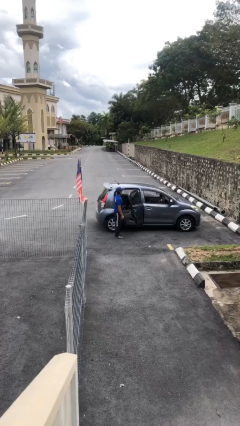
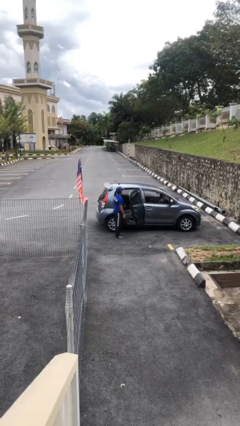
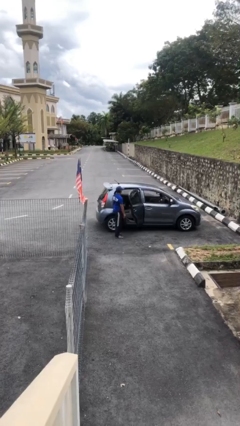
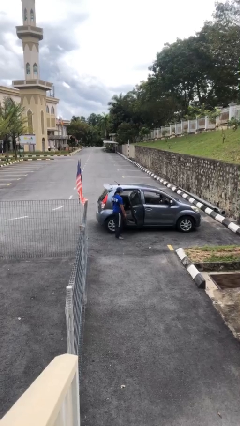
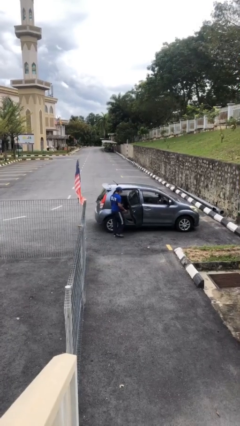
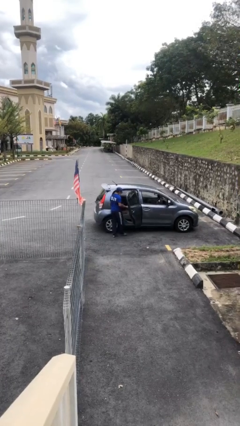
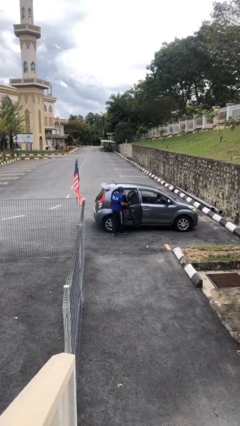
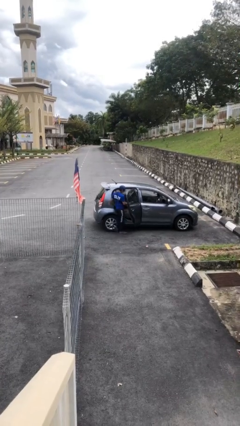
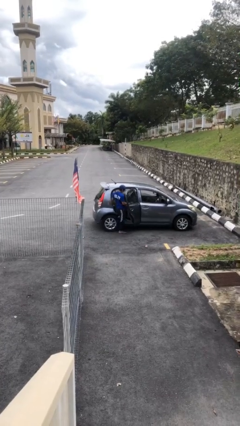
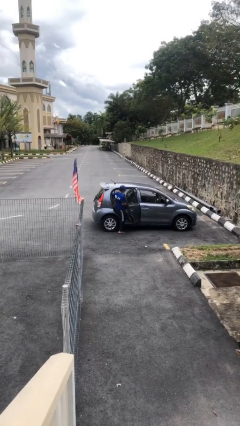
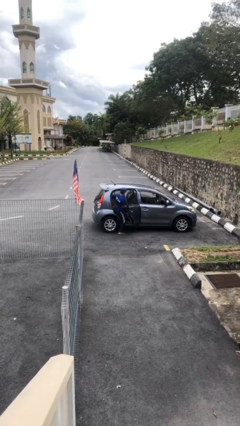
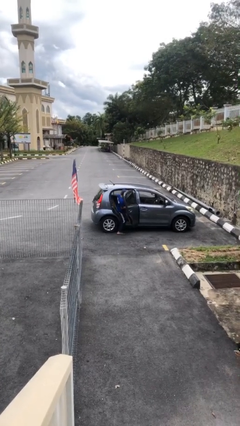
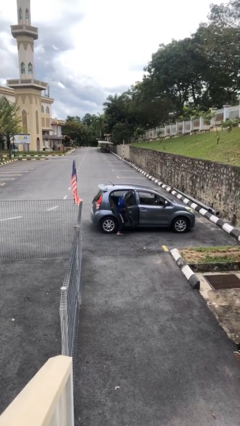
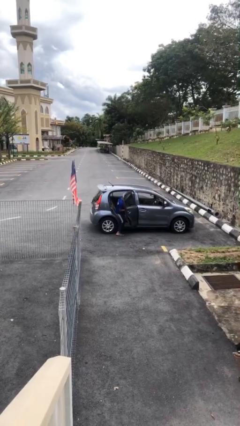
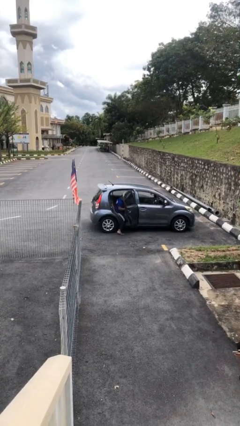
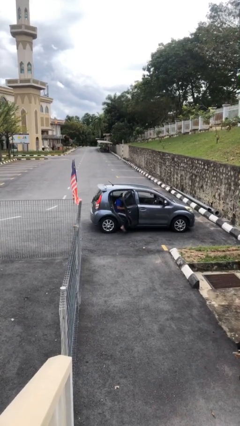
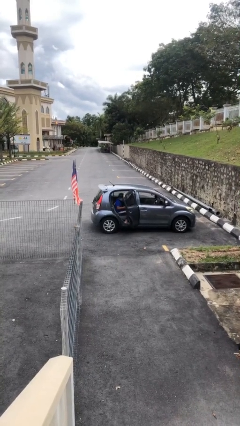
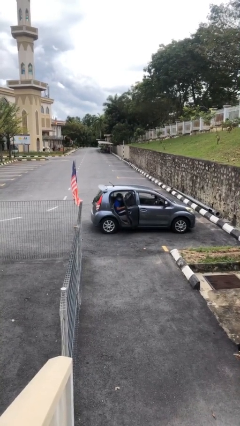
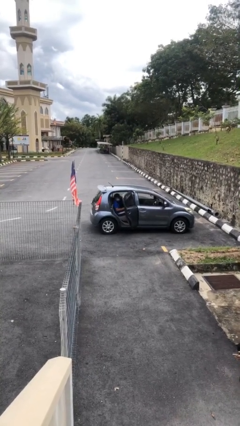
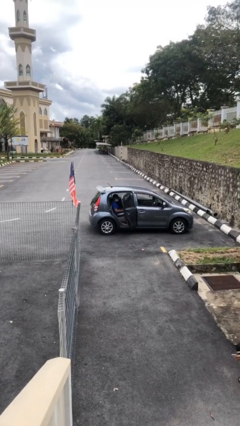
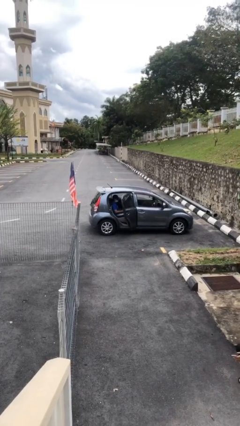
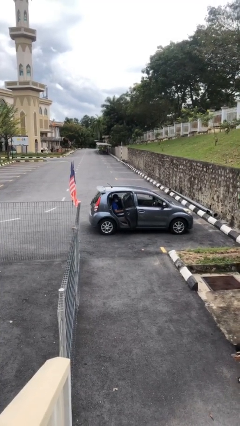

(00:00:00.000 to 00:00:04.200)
person enters car

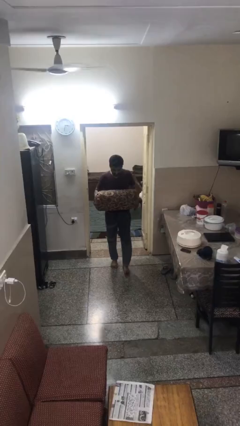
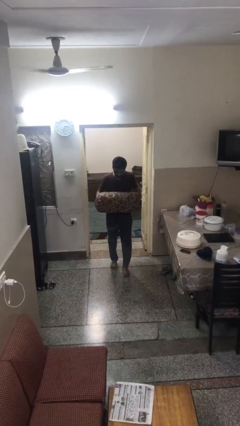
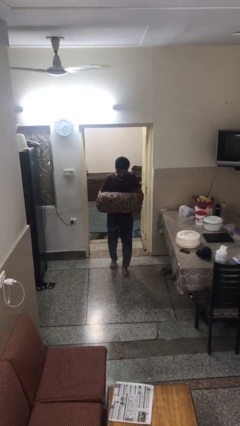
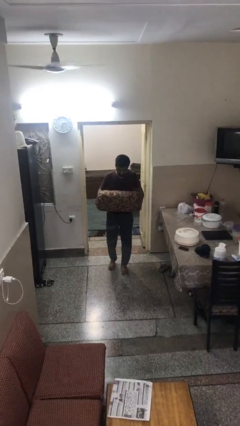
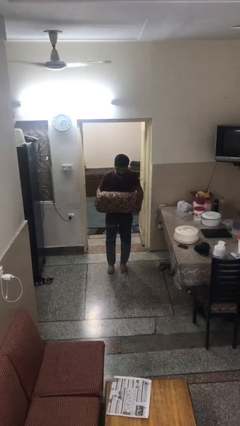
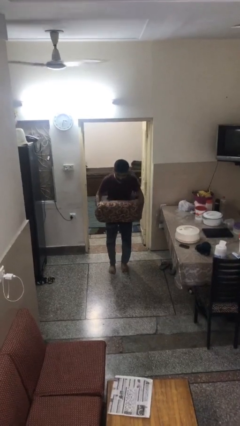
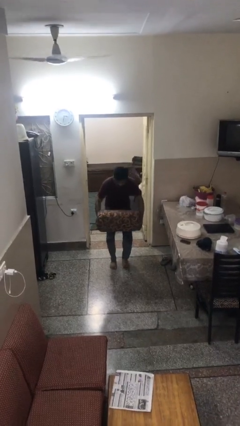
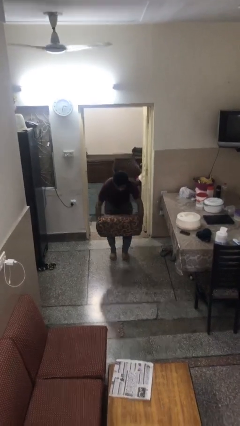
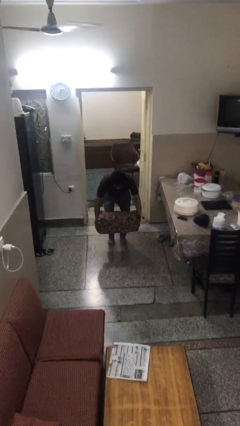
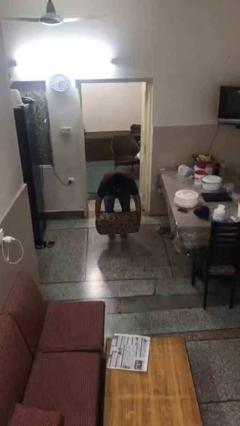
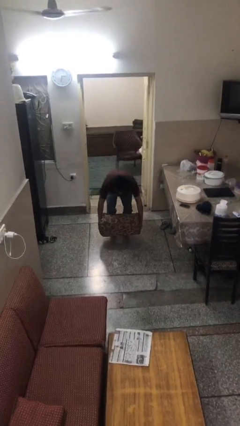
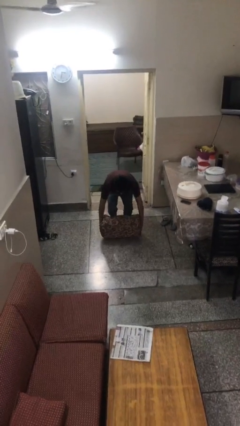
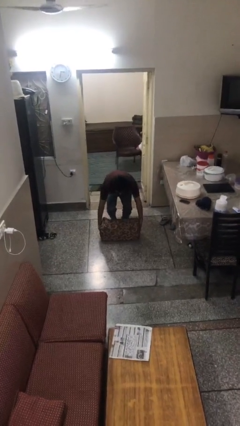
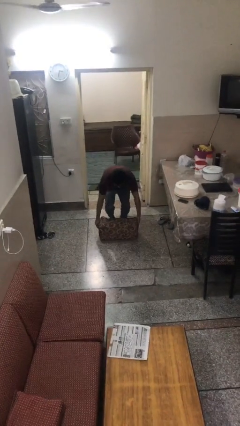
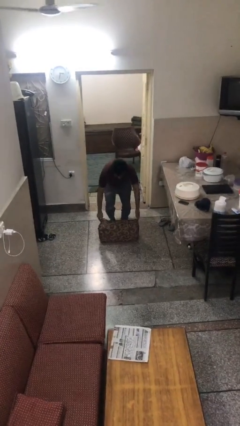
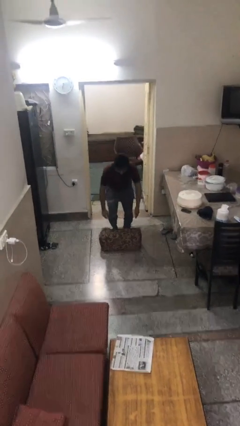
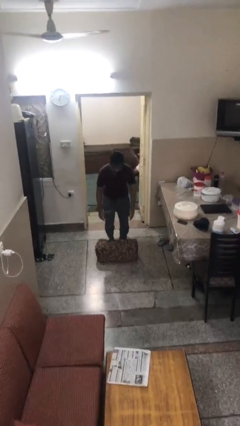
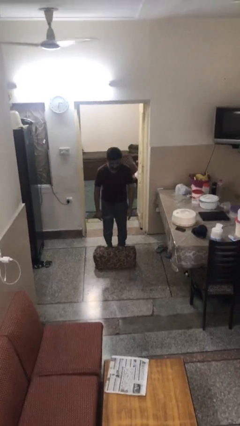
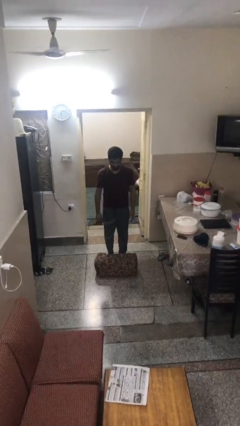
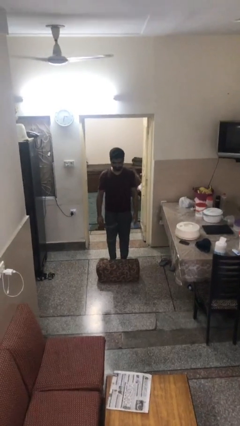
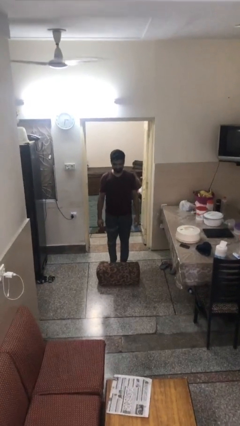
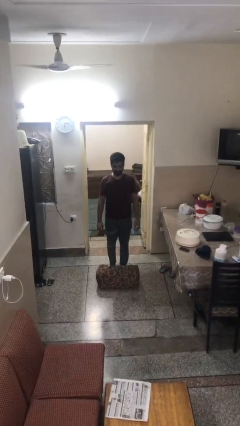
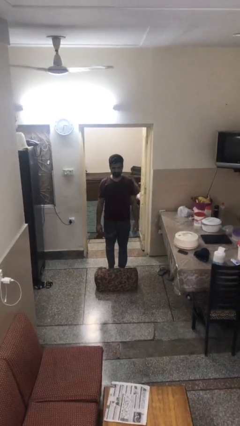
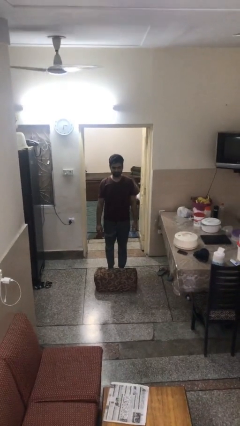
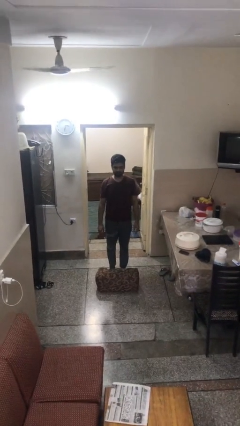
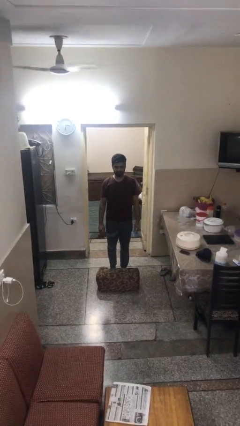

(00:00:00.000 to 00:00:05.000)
person puts down object on floor

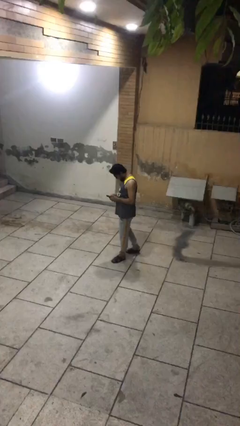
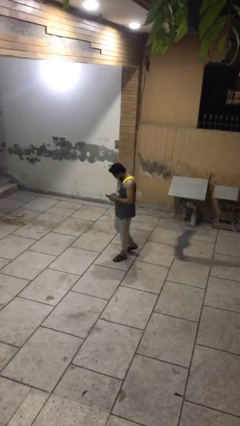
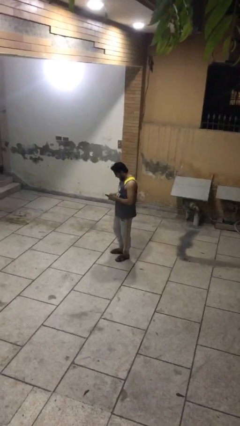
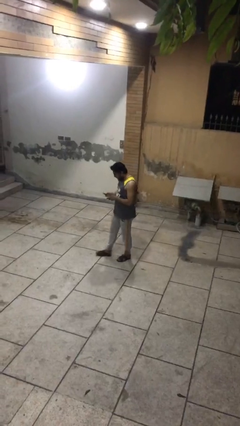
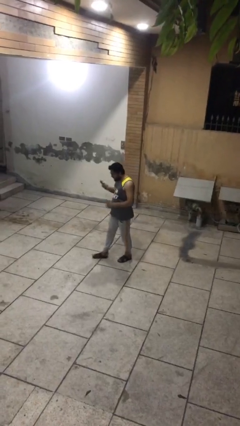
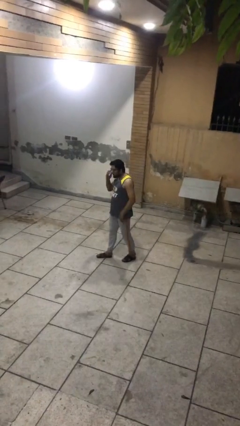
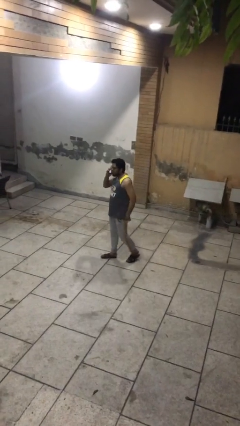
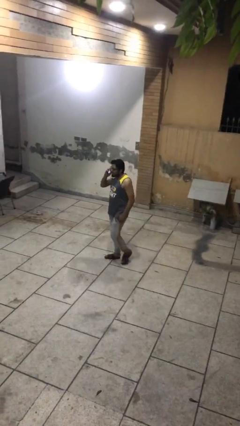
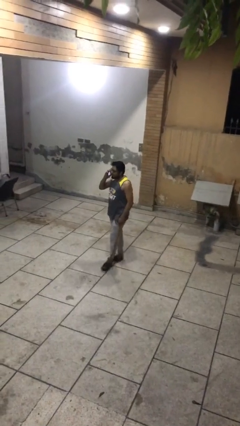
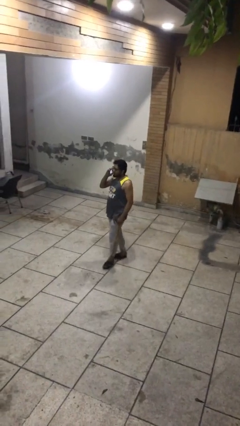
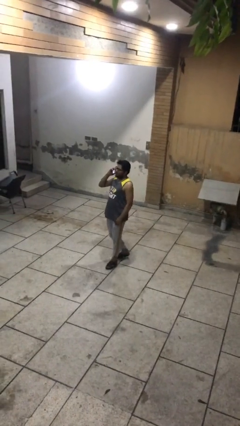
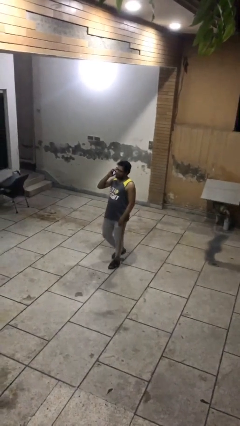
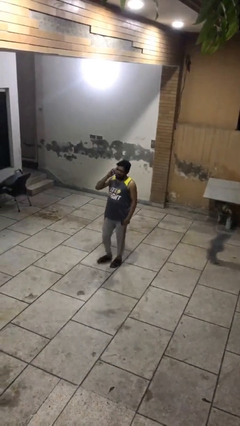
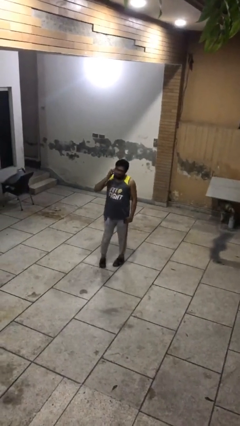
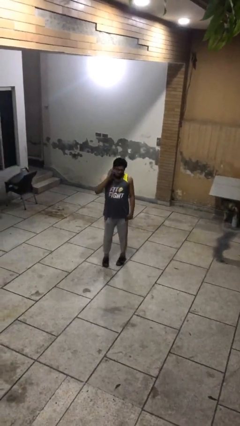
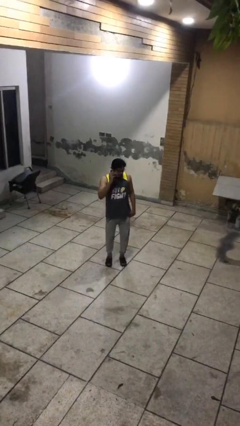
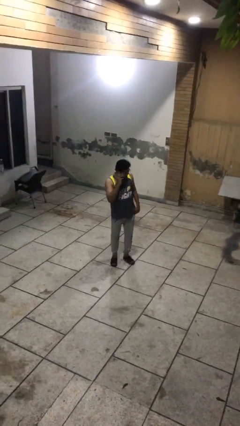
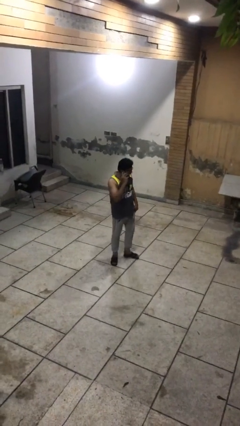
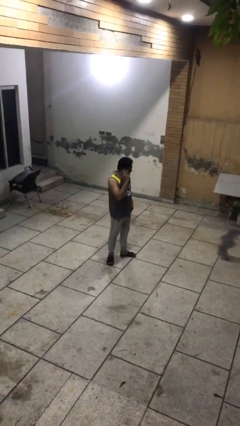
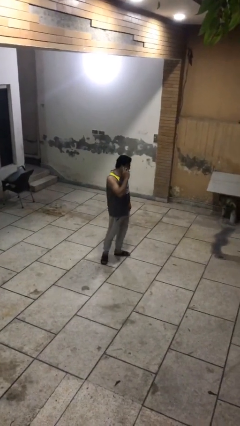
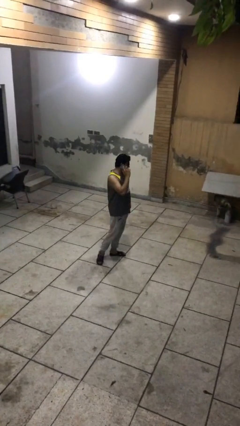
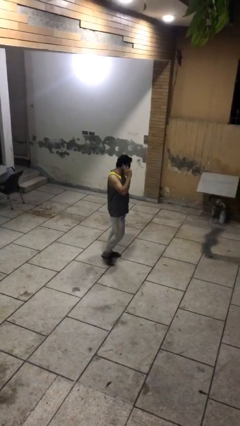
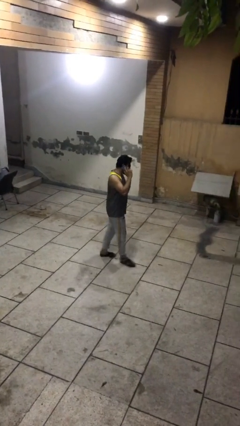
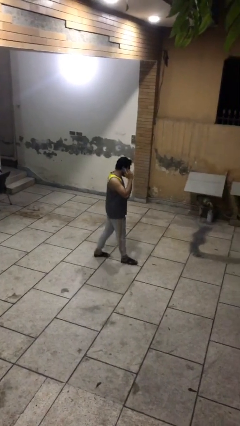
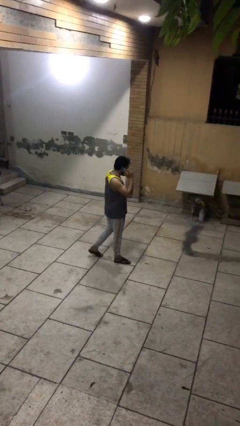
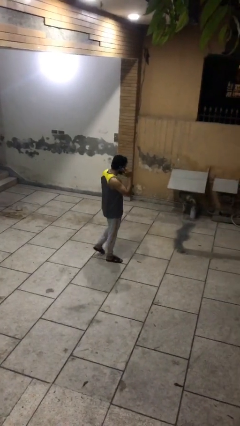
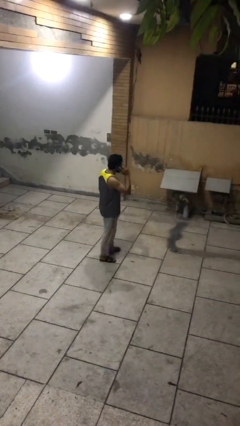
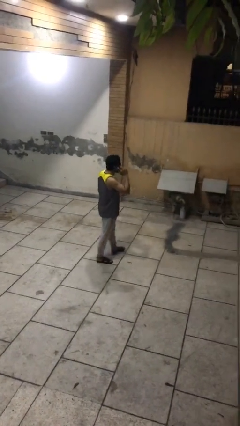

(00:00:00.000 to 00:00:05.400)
person talks on phone

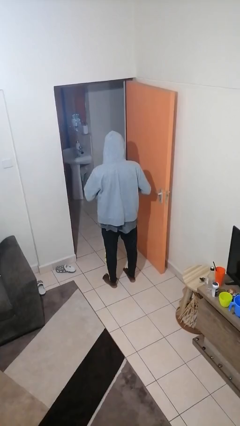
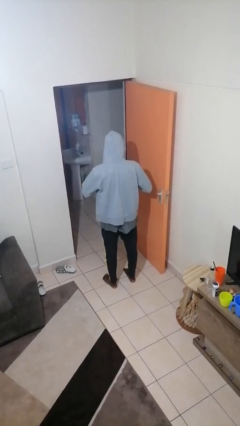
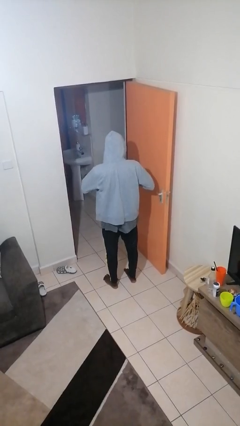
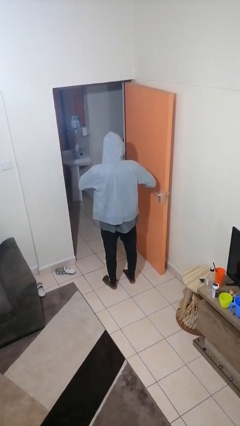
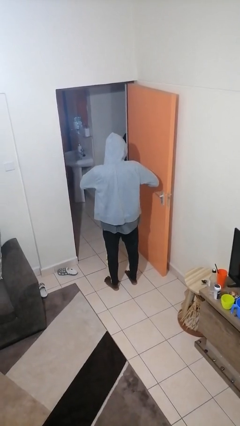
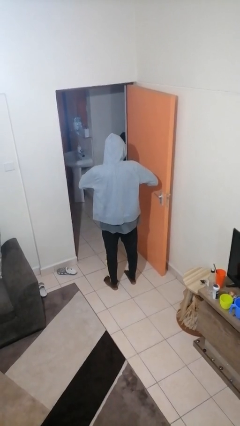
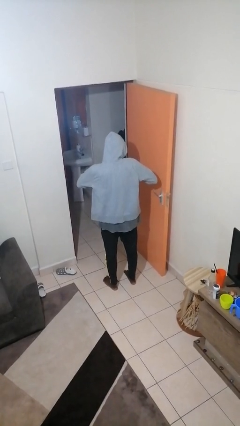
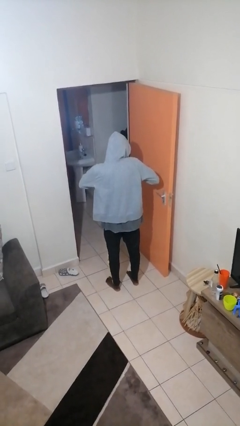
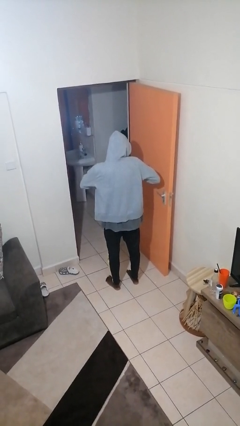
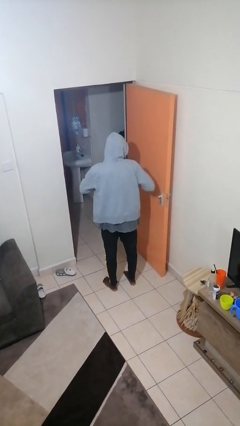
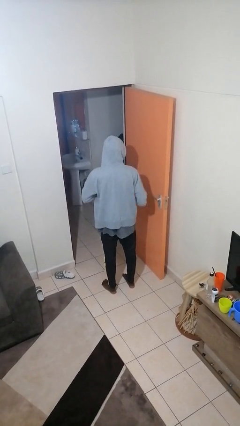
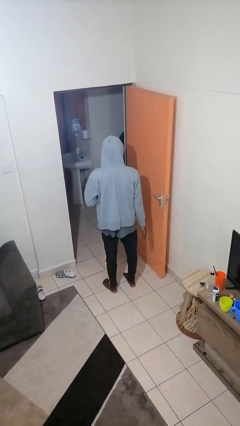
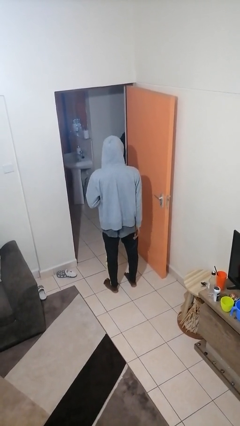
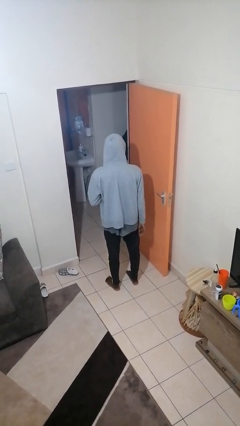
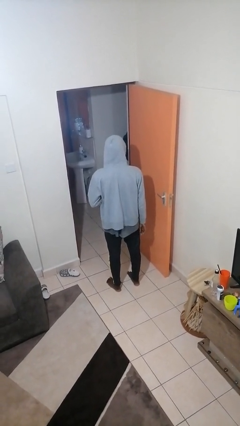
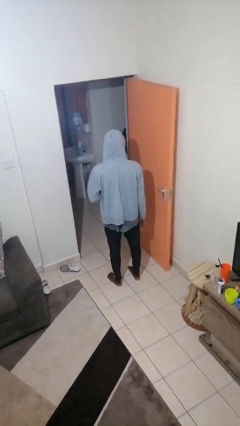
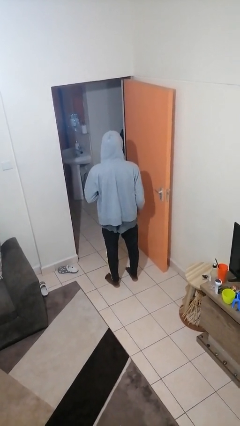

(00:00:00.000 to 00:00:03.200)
person puts on ring
